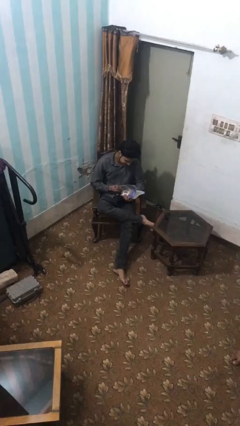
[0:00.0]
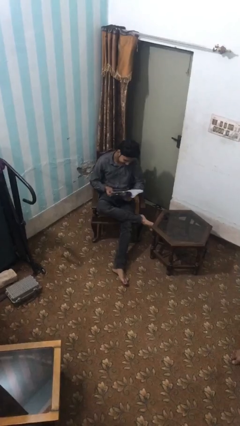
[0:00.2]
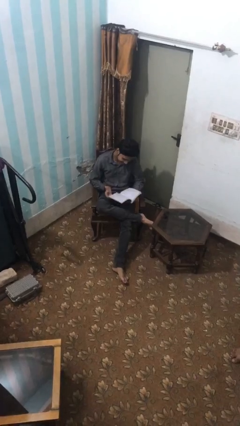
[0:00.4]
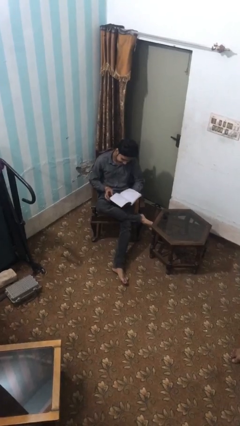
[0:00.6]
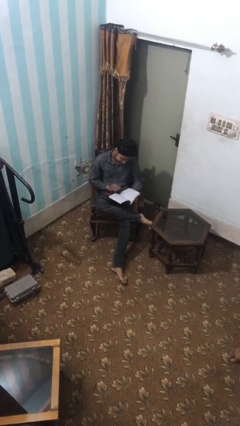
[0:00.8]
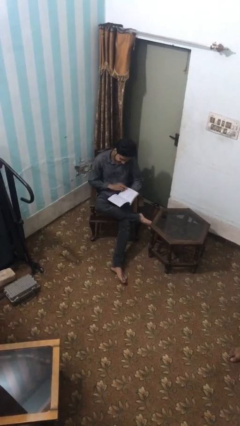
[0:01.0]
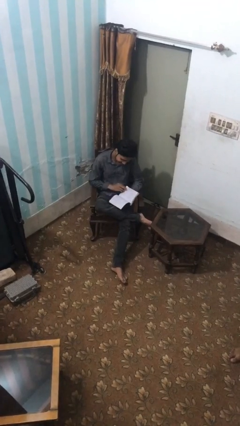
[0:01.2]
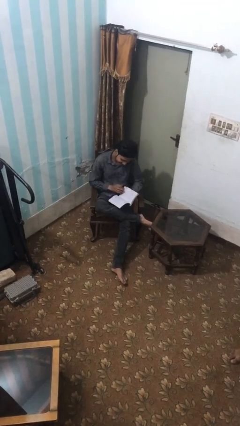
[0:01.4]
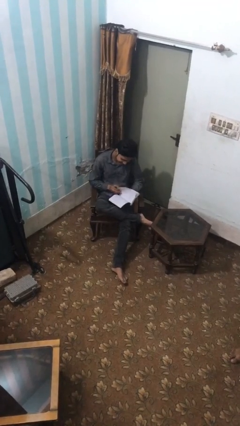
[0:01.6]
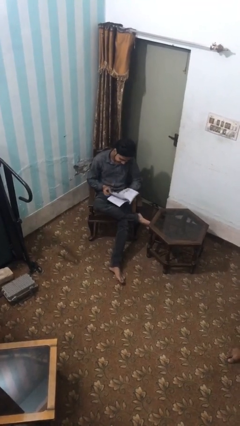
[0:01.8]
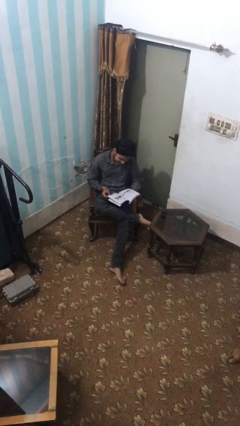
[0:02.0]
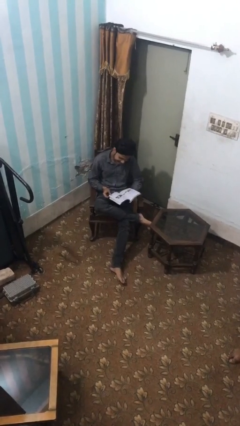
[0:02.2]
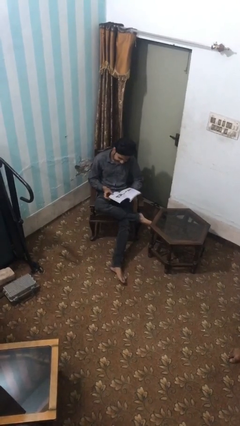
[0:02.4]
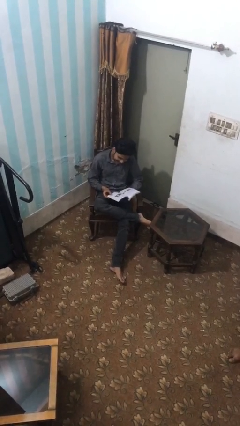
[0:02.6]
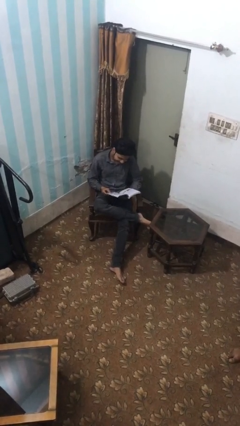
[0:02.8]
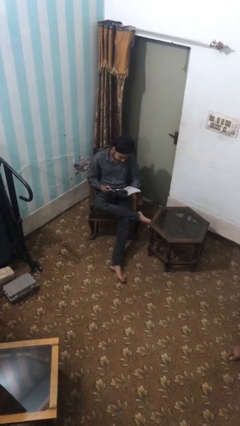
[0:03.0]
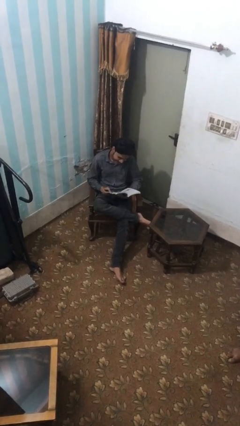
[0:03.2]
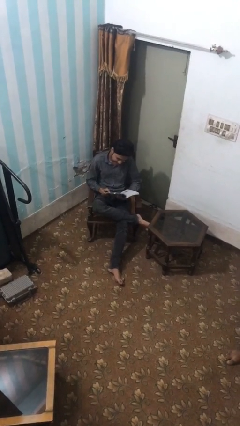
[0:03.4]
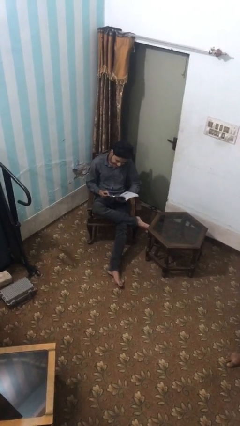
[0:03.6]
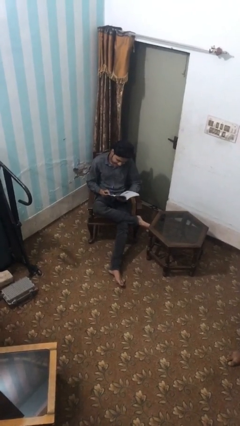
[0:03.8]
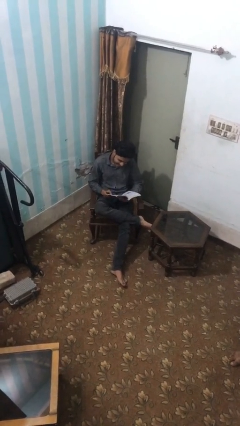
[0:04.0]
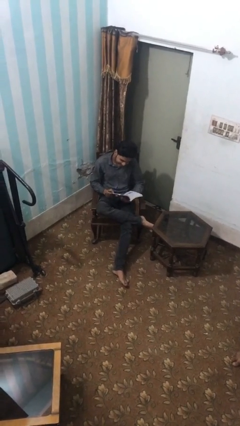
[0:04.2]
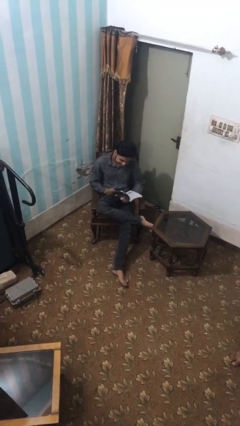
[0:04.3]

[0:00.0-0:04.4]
person reads document

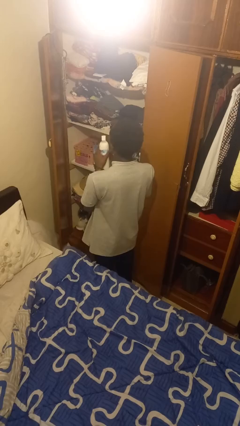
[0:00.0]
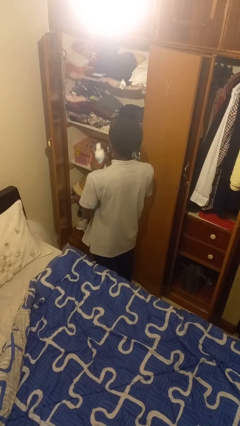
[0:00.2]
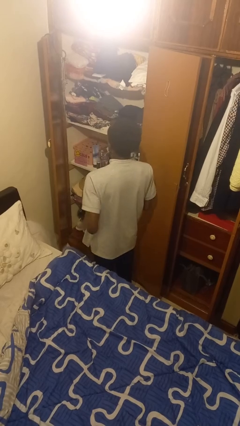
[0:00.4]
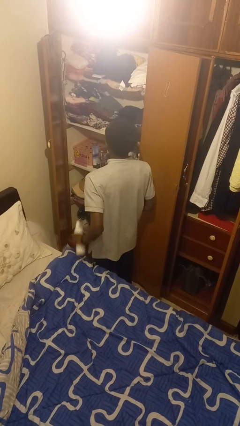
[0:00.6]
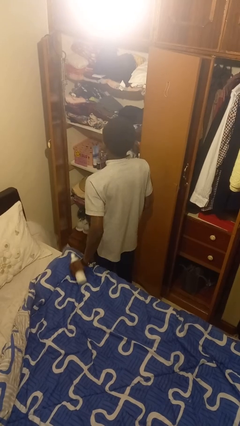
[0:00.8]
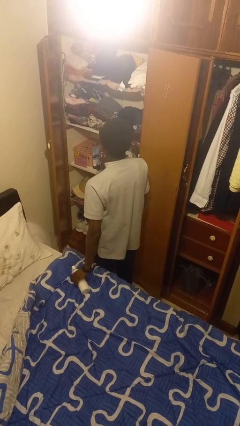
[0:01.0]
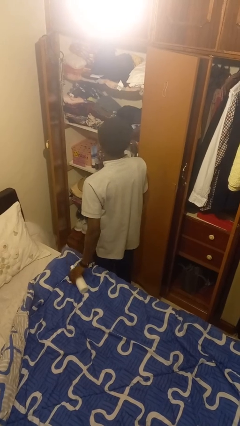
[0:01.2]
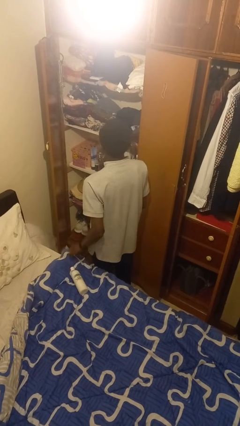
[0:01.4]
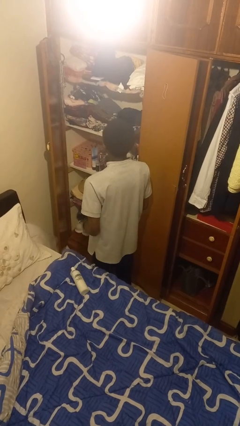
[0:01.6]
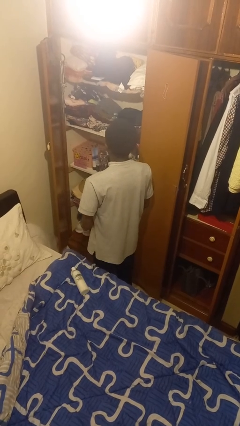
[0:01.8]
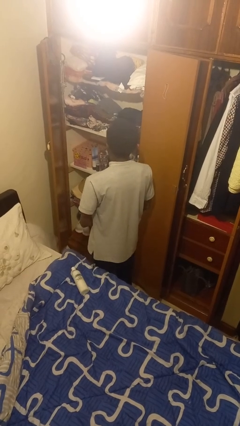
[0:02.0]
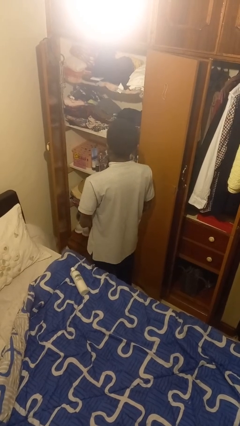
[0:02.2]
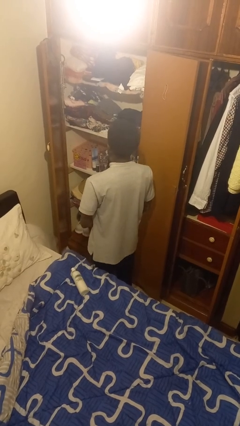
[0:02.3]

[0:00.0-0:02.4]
person puts down object on bed

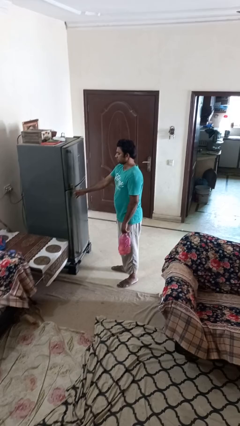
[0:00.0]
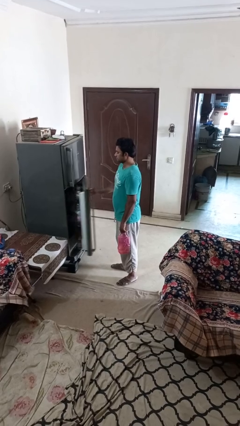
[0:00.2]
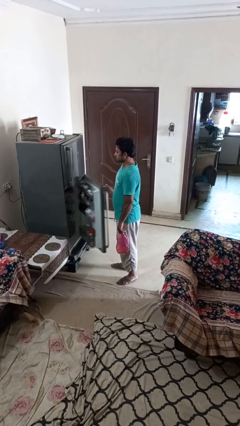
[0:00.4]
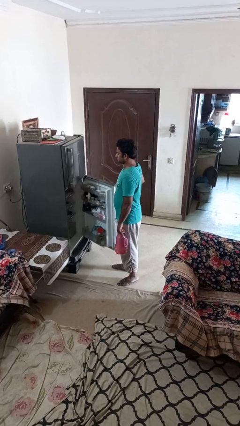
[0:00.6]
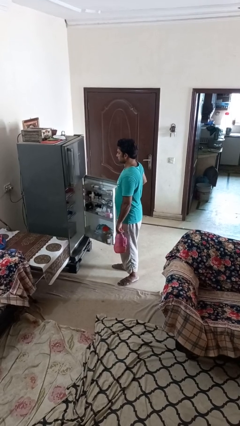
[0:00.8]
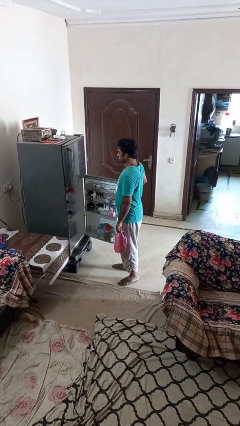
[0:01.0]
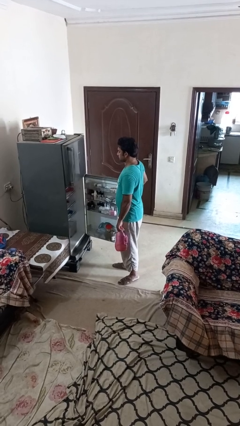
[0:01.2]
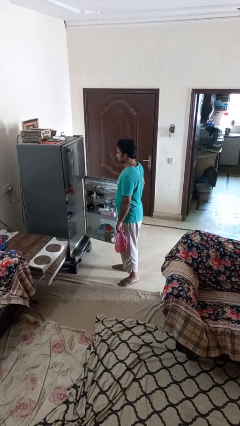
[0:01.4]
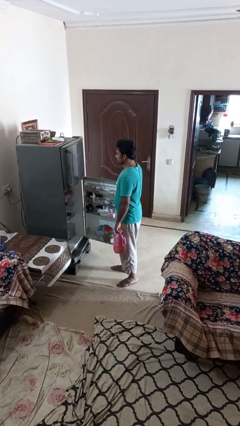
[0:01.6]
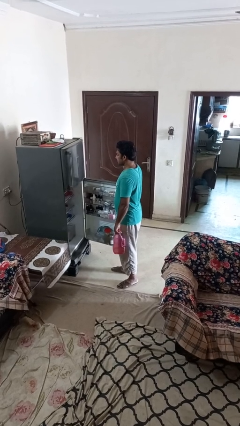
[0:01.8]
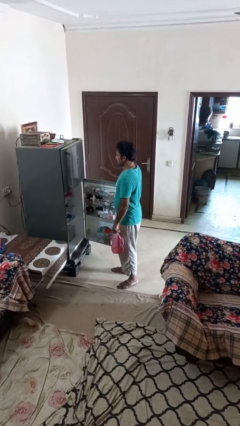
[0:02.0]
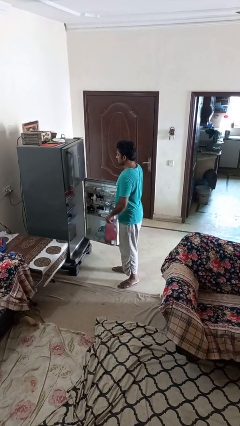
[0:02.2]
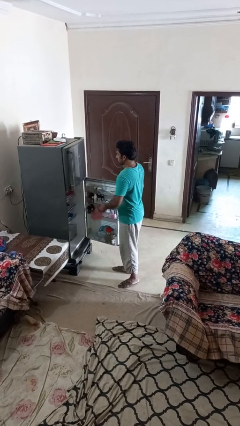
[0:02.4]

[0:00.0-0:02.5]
person opens refrigerator

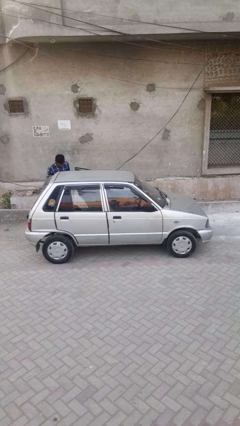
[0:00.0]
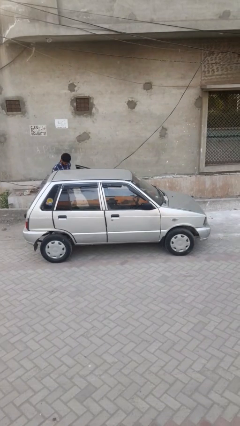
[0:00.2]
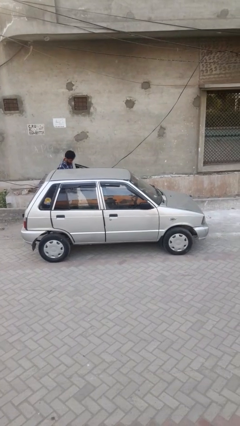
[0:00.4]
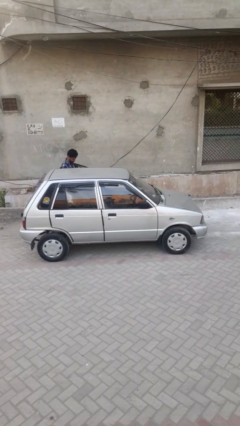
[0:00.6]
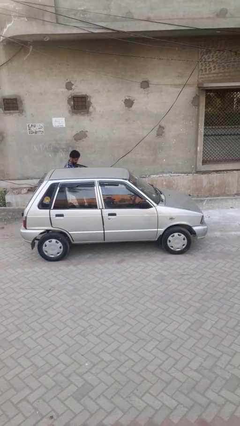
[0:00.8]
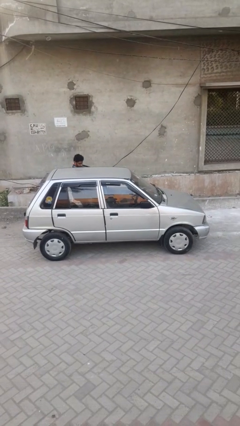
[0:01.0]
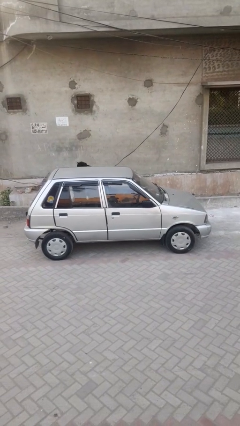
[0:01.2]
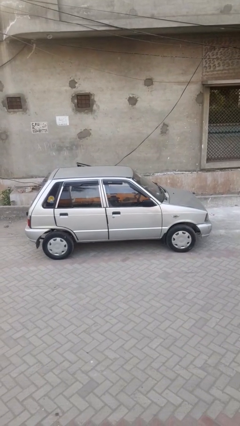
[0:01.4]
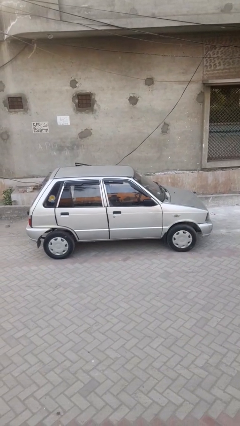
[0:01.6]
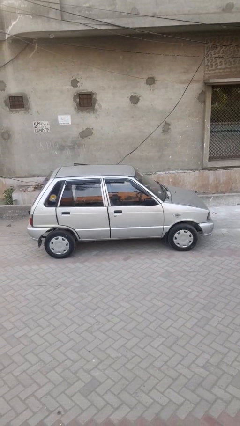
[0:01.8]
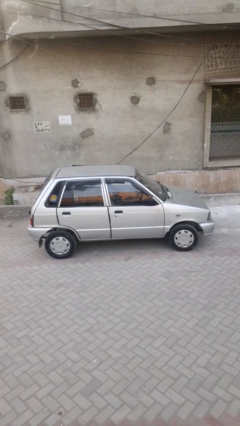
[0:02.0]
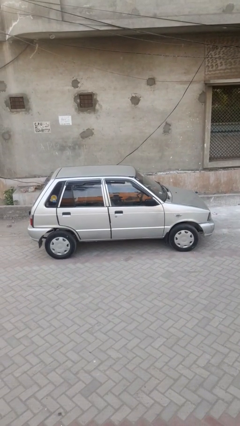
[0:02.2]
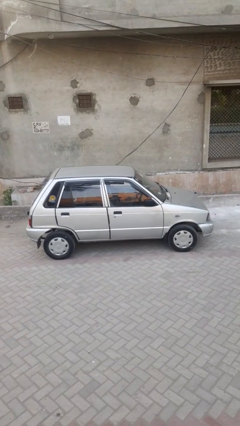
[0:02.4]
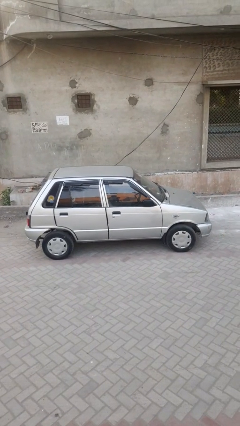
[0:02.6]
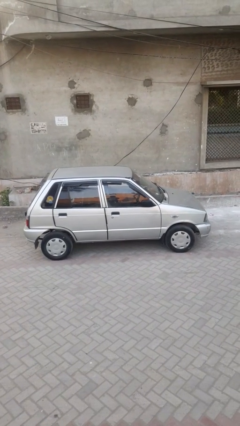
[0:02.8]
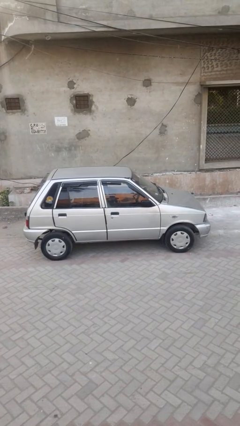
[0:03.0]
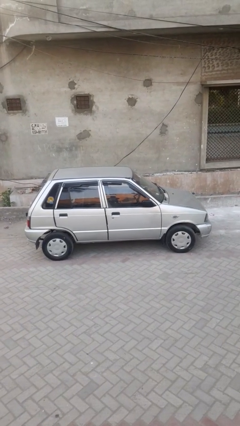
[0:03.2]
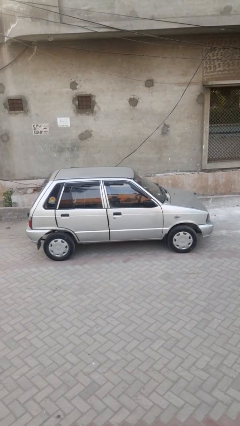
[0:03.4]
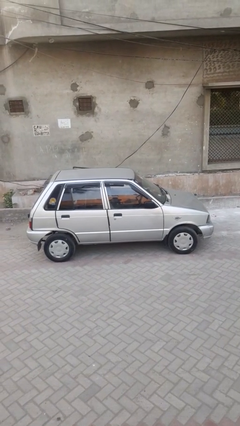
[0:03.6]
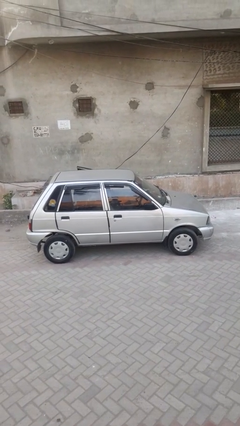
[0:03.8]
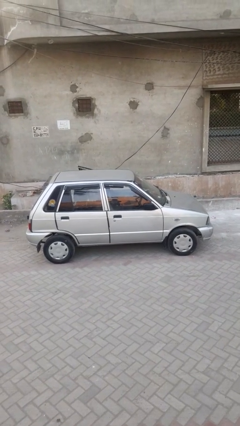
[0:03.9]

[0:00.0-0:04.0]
car picks up person

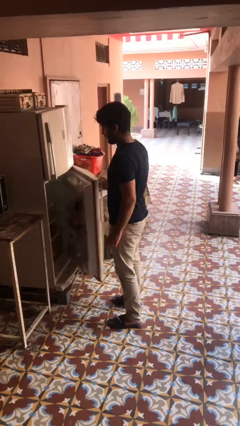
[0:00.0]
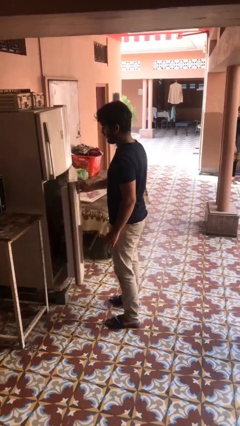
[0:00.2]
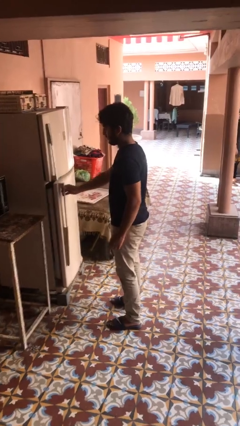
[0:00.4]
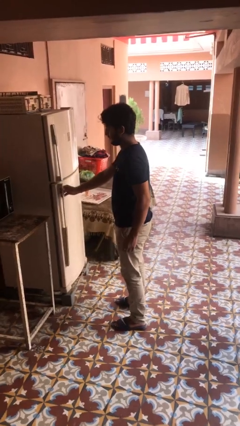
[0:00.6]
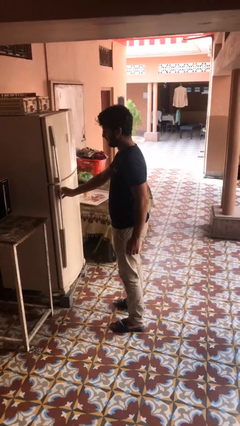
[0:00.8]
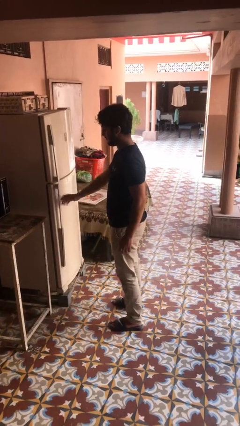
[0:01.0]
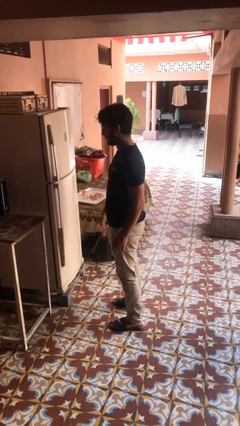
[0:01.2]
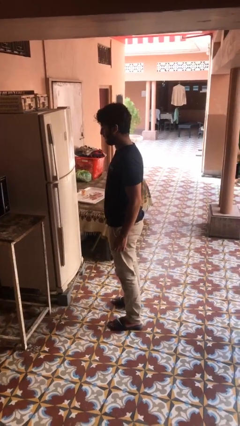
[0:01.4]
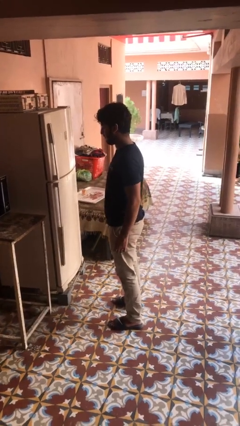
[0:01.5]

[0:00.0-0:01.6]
person closes refrigerator

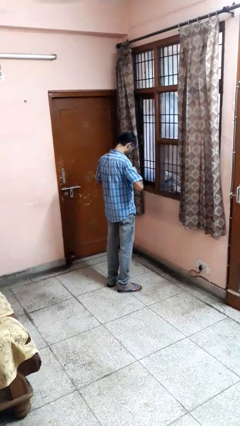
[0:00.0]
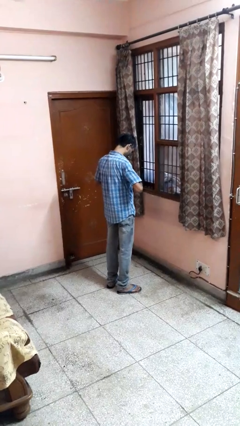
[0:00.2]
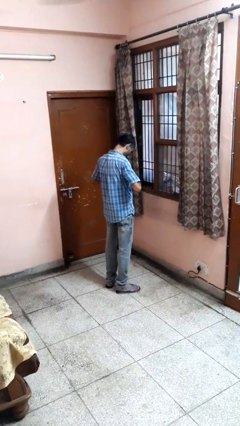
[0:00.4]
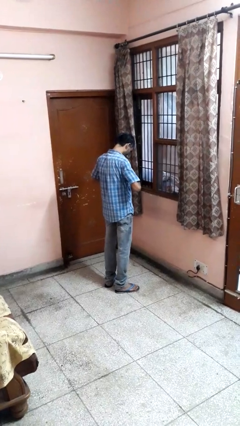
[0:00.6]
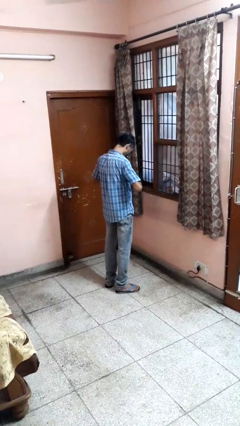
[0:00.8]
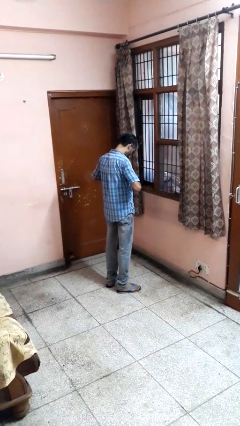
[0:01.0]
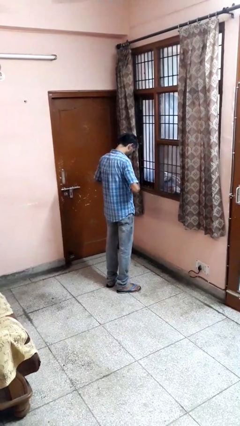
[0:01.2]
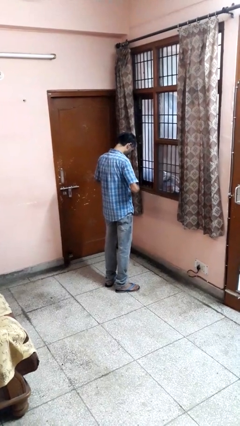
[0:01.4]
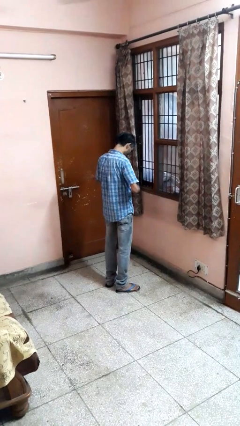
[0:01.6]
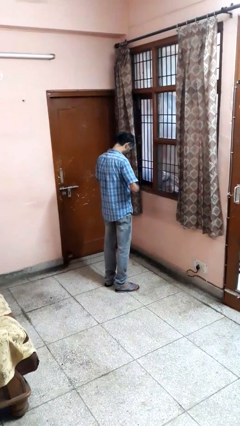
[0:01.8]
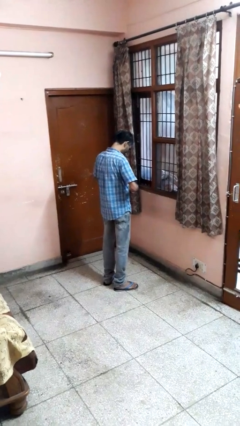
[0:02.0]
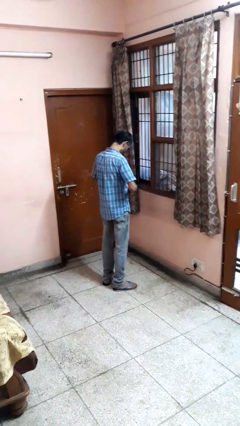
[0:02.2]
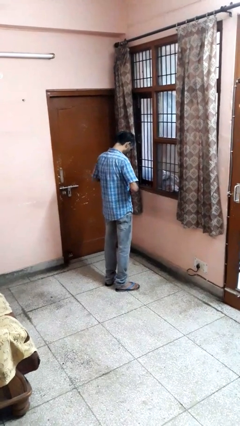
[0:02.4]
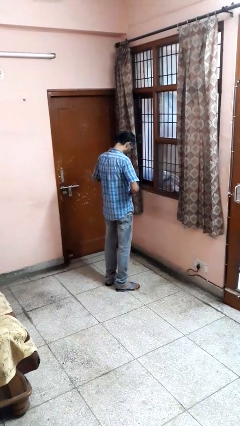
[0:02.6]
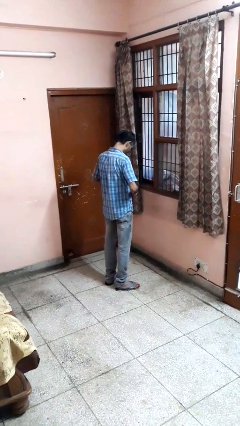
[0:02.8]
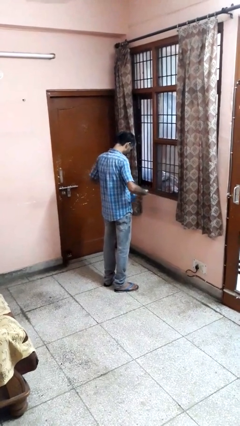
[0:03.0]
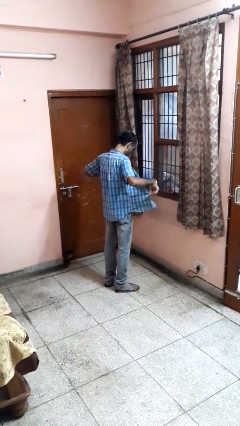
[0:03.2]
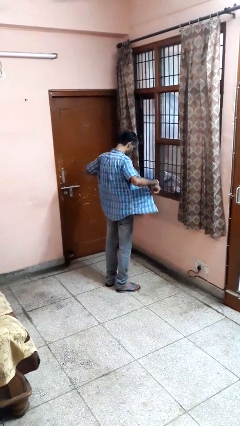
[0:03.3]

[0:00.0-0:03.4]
person unbuttons shirt
